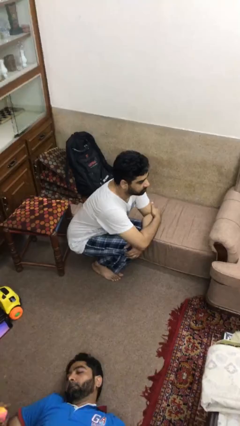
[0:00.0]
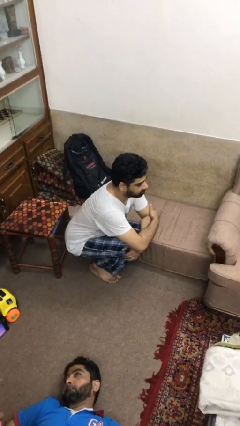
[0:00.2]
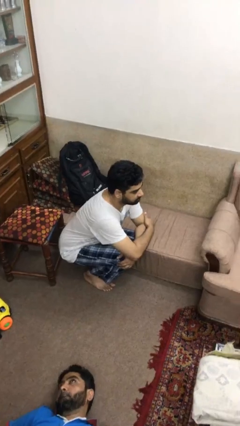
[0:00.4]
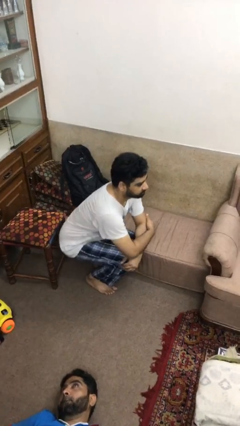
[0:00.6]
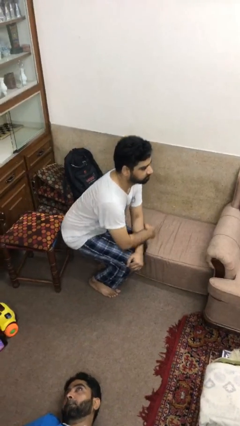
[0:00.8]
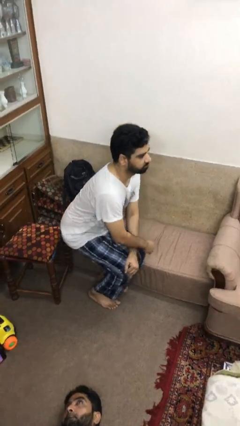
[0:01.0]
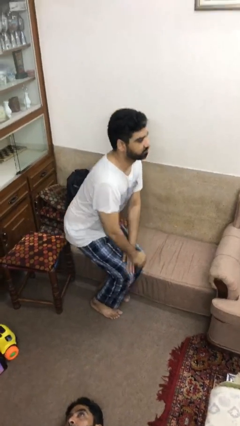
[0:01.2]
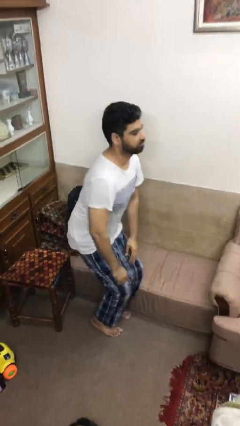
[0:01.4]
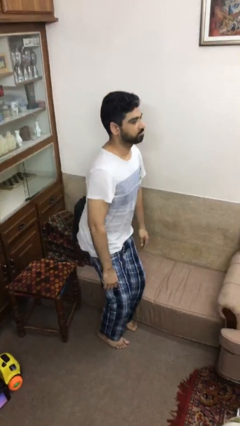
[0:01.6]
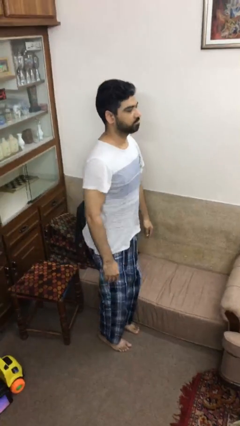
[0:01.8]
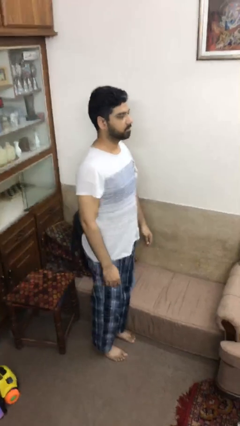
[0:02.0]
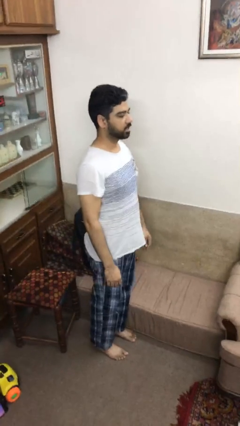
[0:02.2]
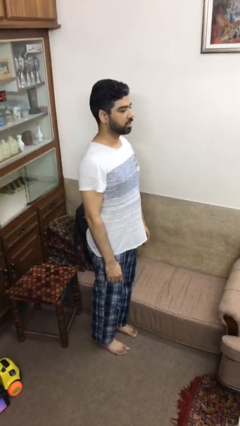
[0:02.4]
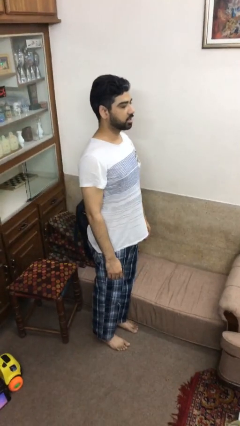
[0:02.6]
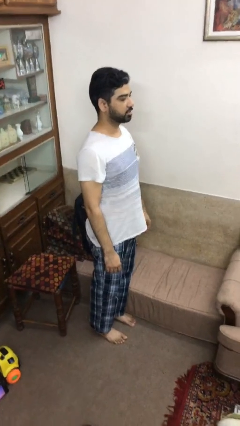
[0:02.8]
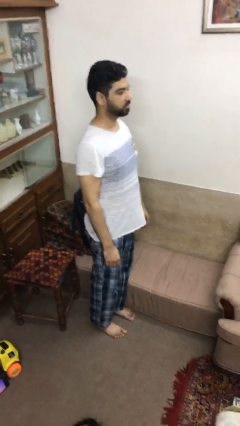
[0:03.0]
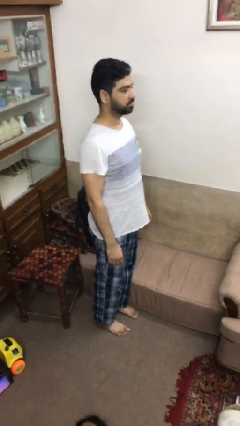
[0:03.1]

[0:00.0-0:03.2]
person stands up

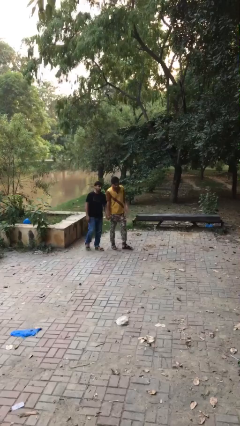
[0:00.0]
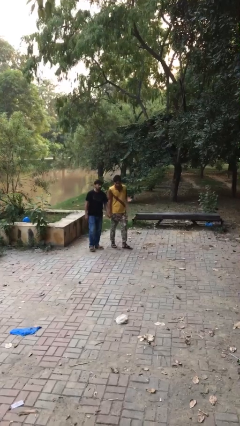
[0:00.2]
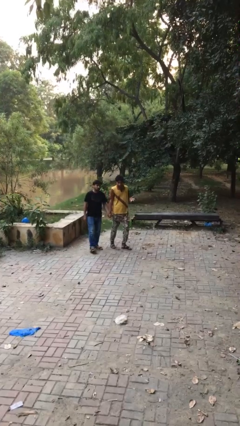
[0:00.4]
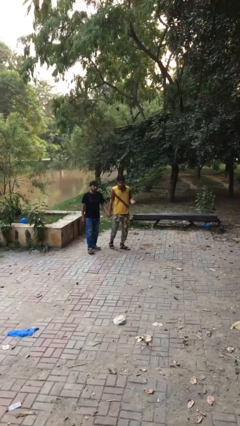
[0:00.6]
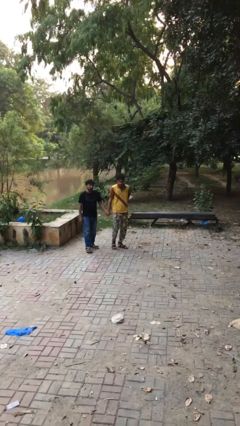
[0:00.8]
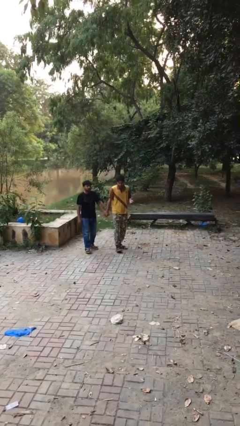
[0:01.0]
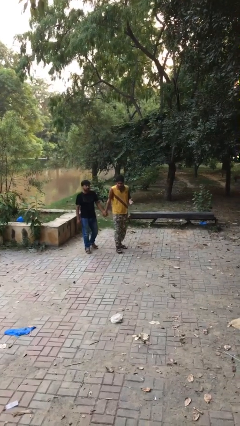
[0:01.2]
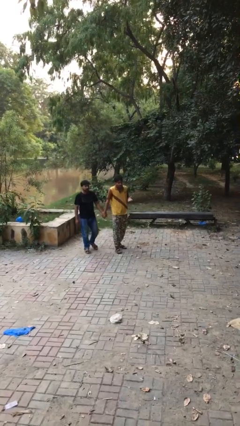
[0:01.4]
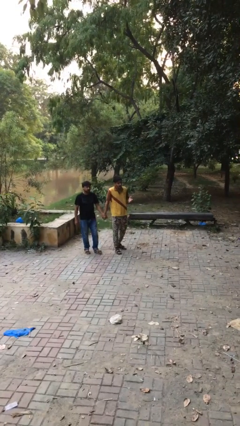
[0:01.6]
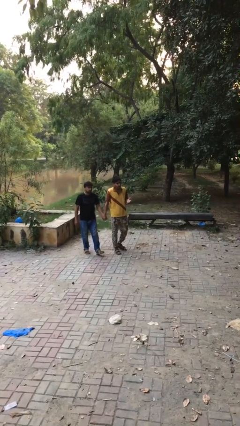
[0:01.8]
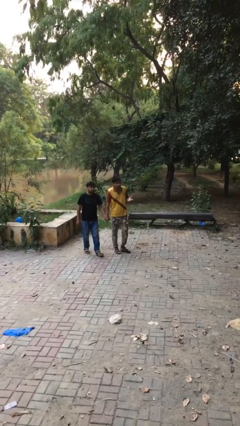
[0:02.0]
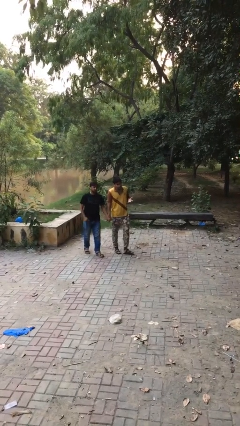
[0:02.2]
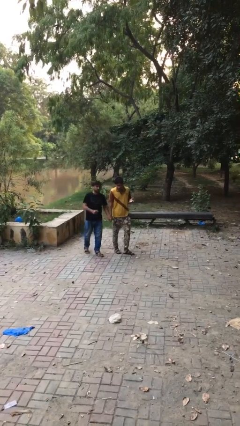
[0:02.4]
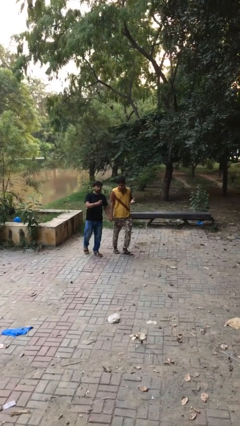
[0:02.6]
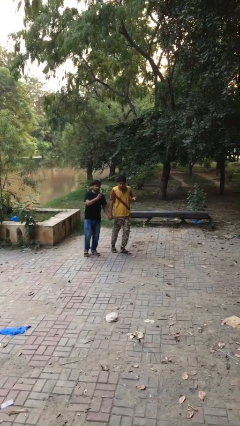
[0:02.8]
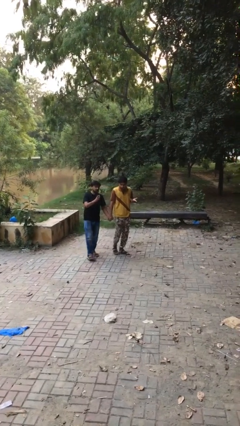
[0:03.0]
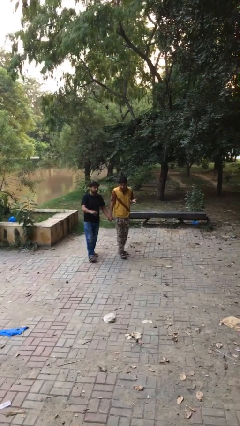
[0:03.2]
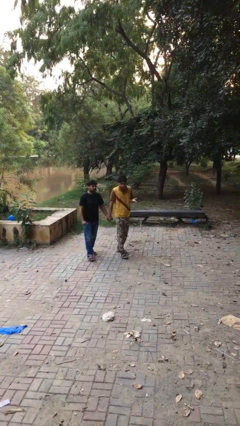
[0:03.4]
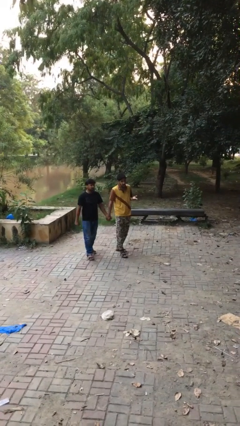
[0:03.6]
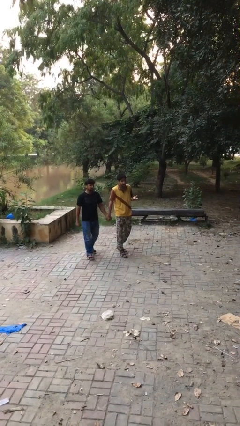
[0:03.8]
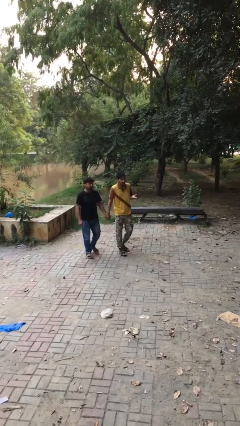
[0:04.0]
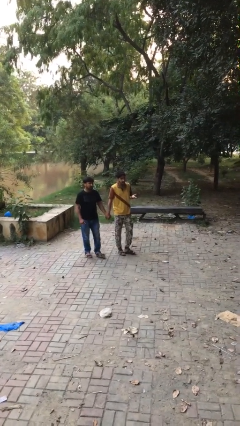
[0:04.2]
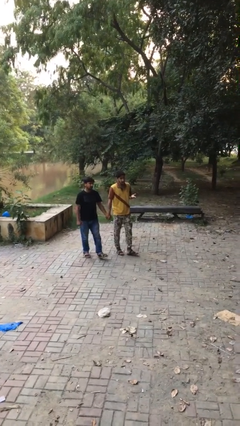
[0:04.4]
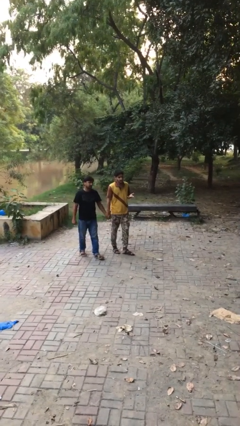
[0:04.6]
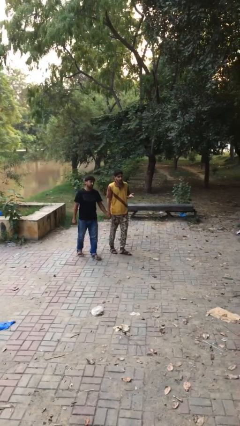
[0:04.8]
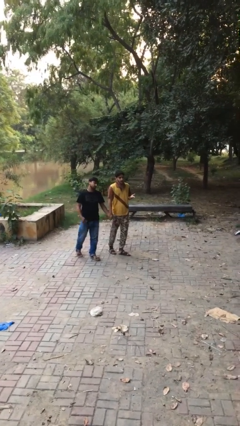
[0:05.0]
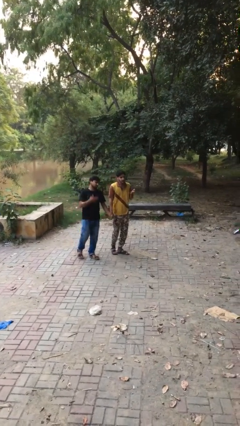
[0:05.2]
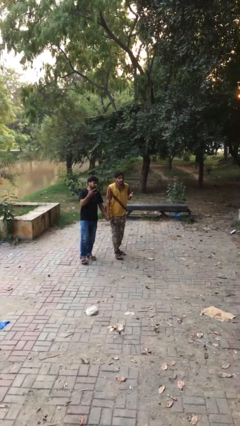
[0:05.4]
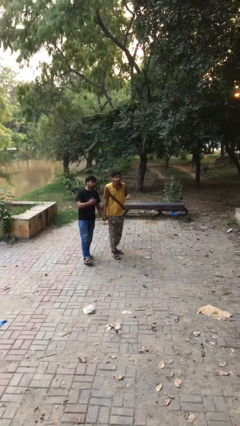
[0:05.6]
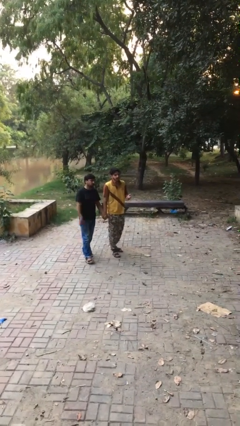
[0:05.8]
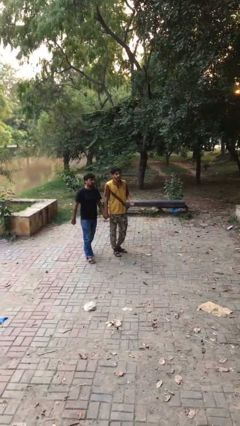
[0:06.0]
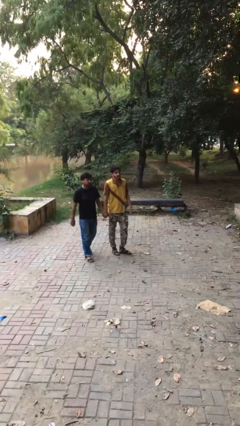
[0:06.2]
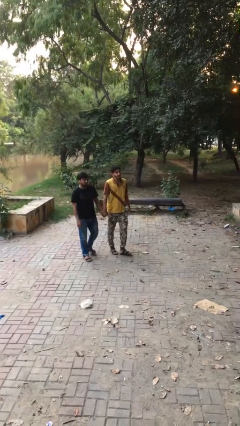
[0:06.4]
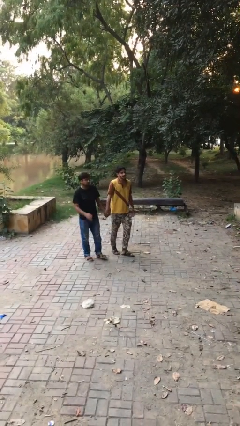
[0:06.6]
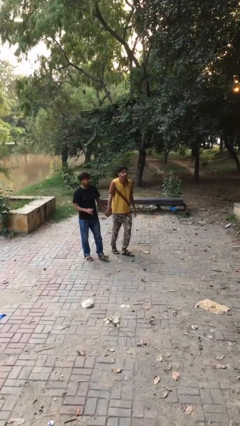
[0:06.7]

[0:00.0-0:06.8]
person holds hand

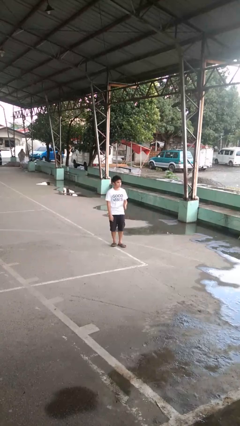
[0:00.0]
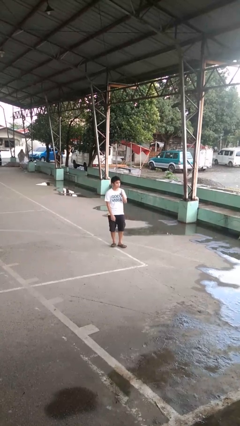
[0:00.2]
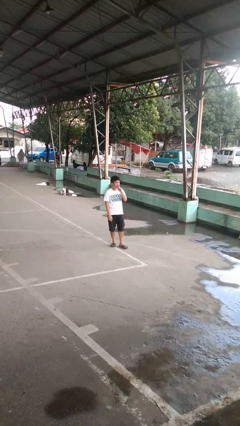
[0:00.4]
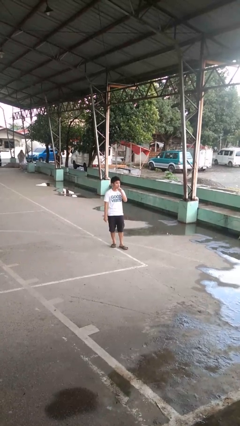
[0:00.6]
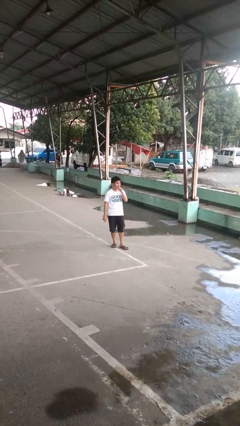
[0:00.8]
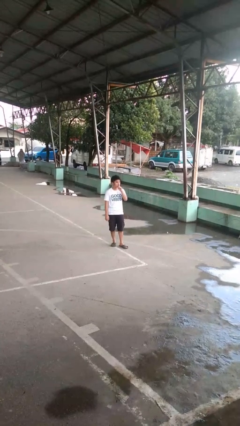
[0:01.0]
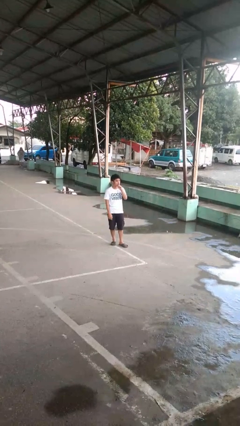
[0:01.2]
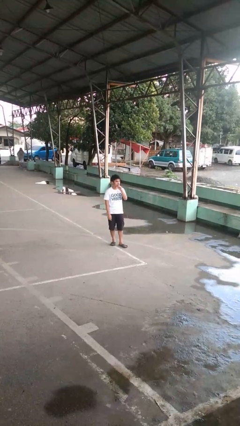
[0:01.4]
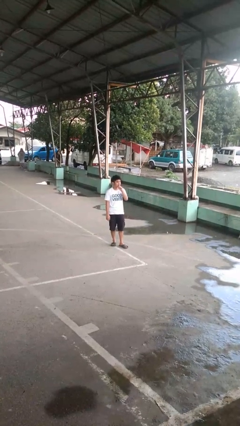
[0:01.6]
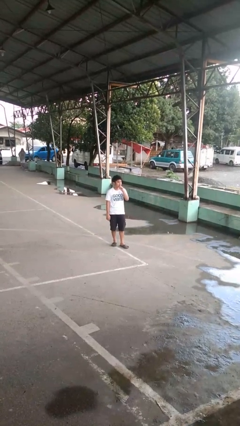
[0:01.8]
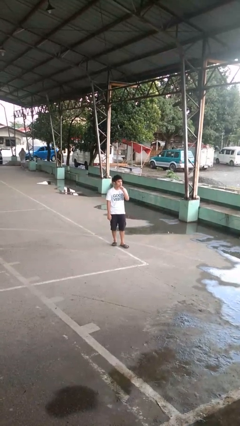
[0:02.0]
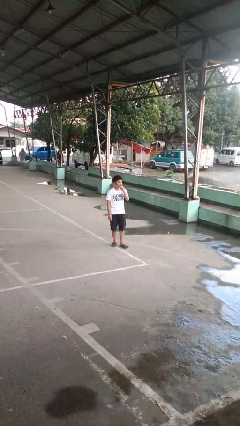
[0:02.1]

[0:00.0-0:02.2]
person gestures be quiet

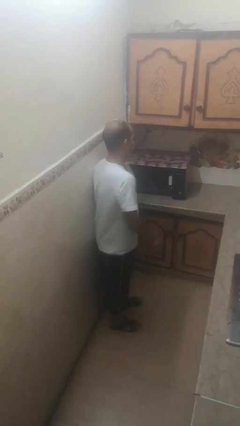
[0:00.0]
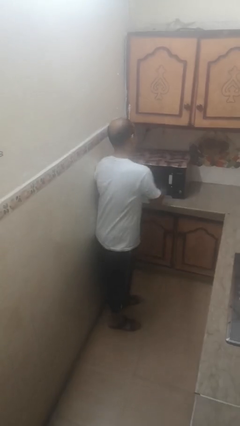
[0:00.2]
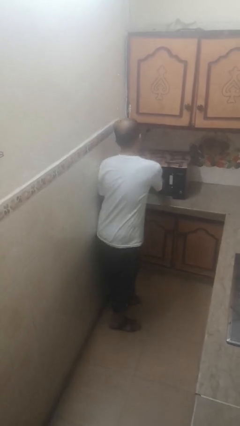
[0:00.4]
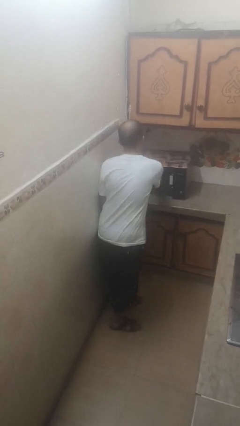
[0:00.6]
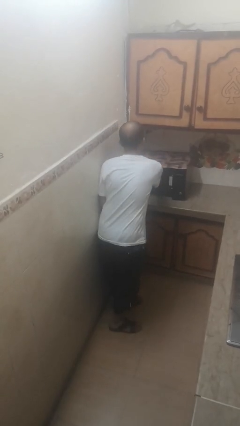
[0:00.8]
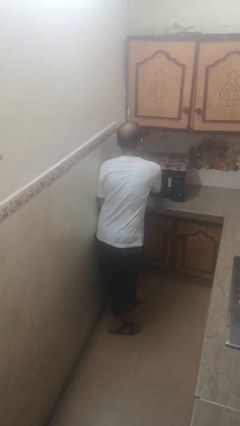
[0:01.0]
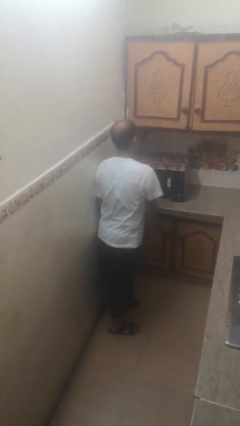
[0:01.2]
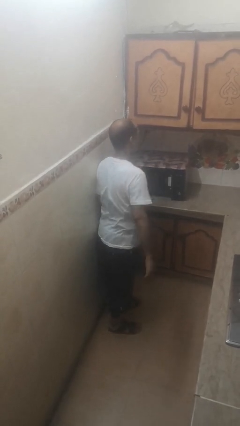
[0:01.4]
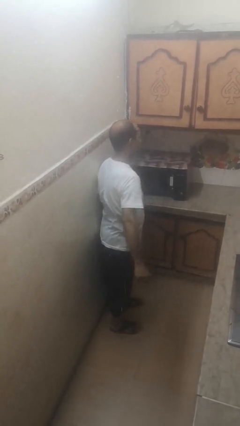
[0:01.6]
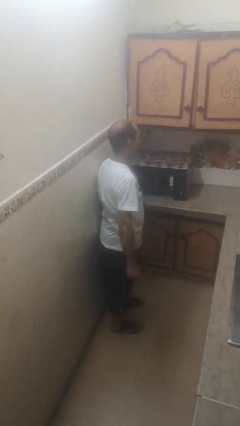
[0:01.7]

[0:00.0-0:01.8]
person puts object into microwave

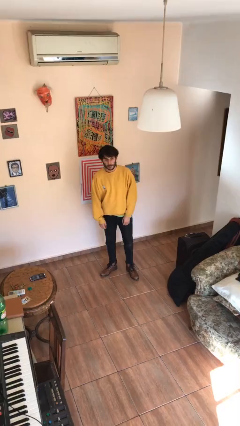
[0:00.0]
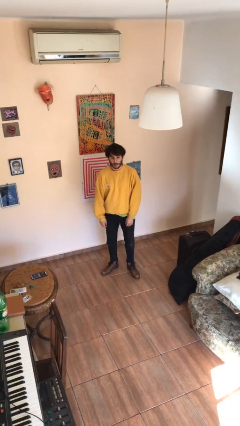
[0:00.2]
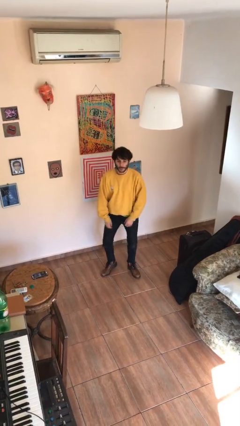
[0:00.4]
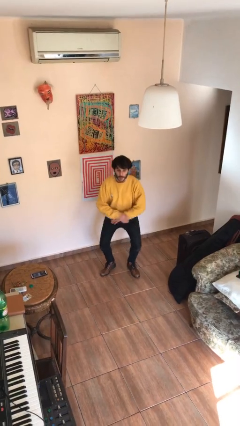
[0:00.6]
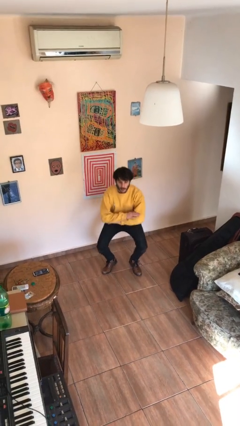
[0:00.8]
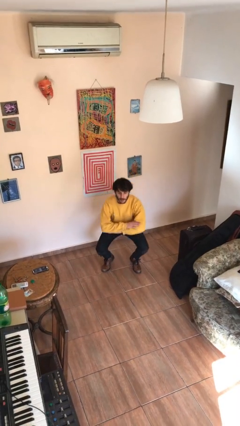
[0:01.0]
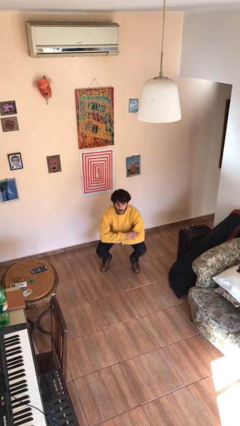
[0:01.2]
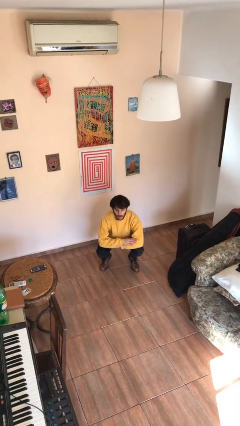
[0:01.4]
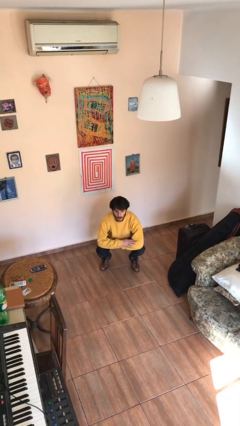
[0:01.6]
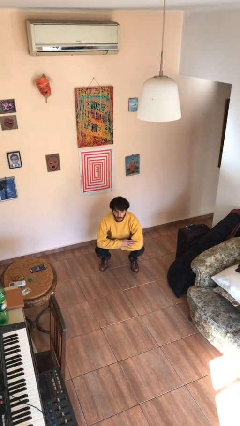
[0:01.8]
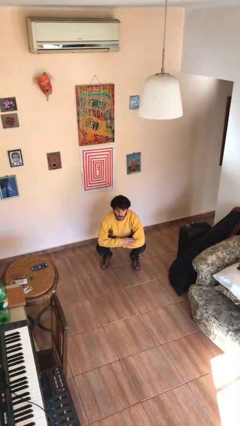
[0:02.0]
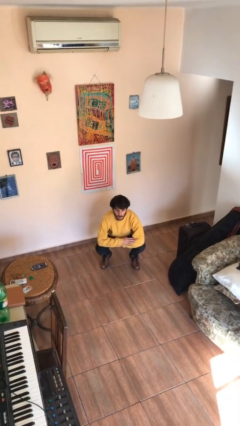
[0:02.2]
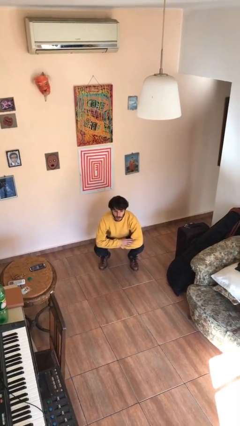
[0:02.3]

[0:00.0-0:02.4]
person squats

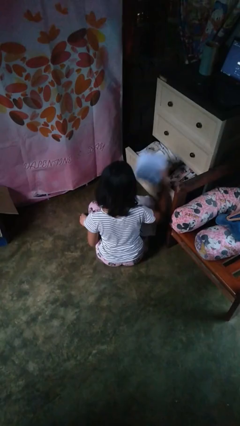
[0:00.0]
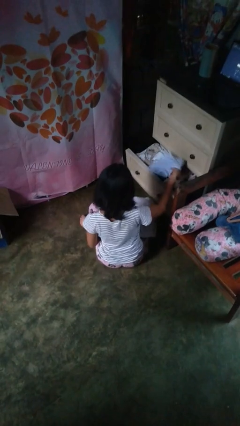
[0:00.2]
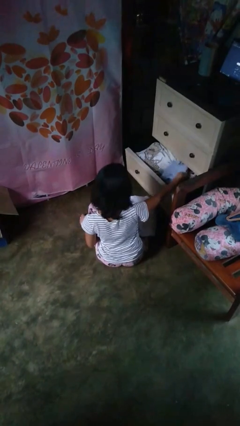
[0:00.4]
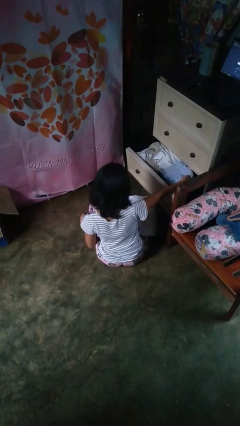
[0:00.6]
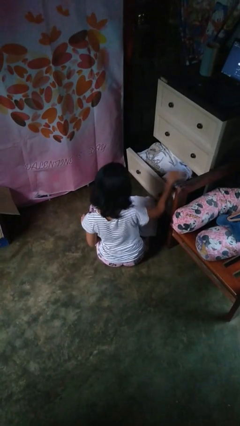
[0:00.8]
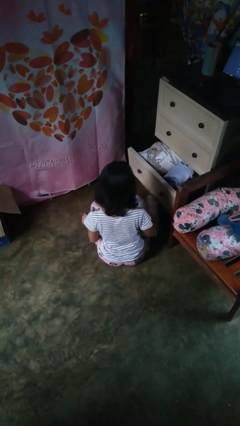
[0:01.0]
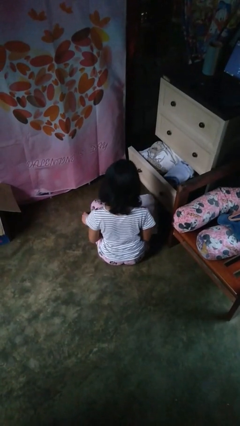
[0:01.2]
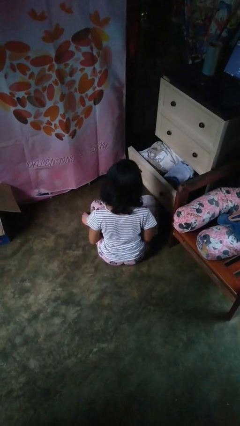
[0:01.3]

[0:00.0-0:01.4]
person puts clothes into dresser
